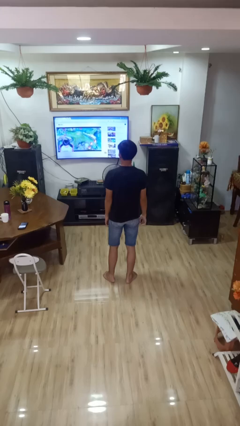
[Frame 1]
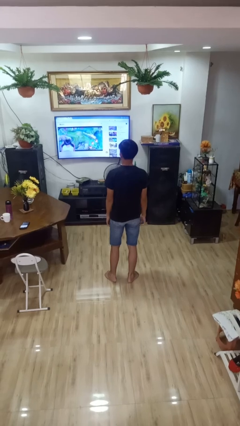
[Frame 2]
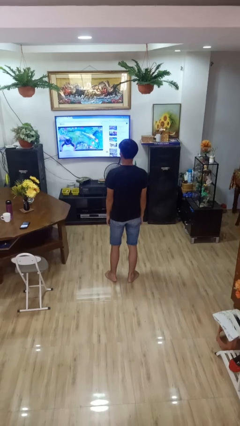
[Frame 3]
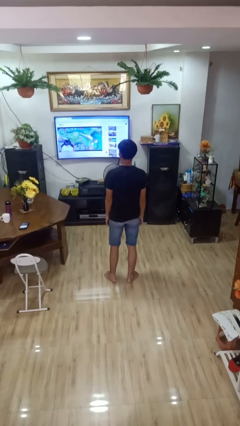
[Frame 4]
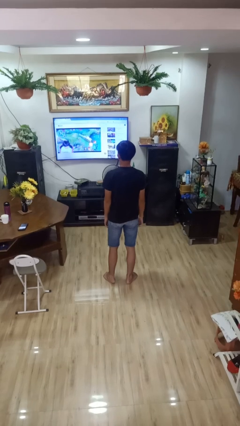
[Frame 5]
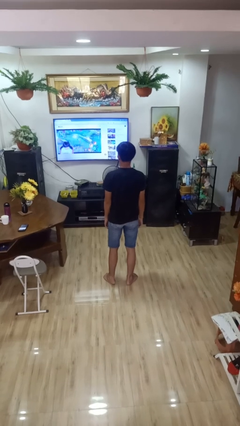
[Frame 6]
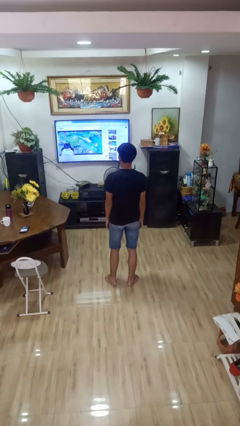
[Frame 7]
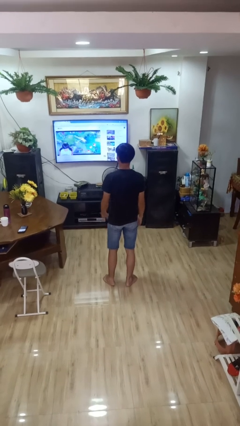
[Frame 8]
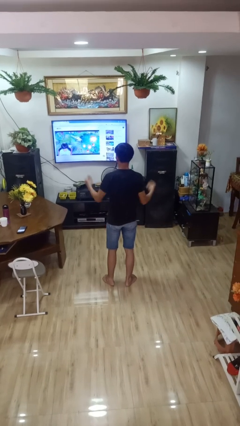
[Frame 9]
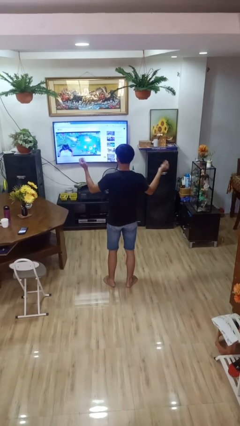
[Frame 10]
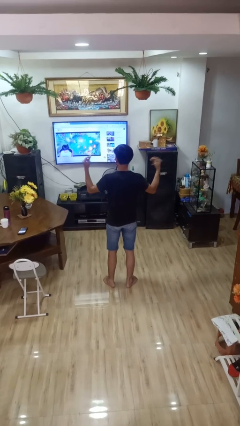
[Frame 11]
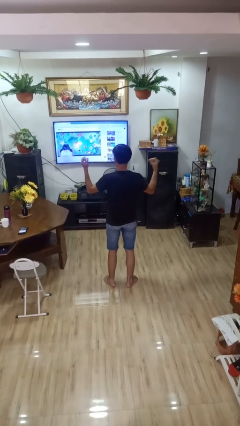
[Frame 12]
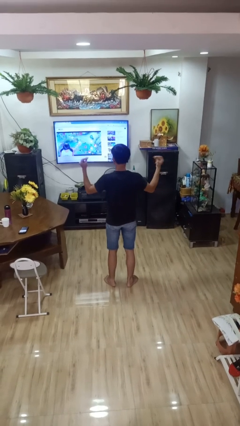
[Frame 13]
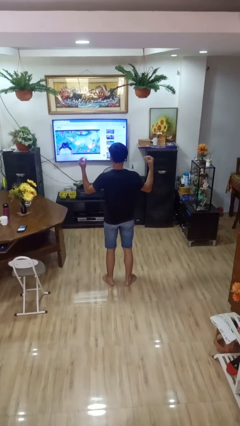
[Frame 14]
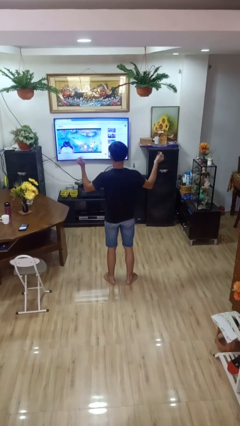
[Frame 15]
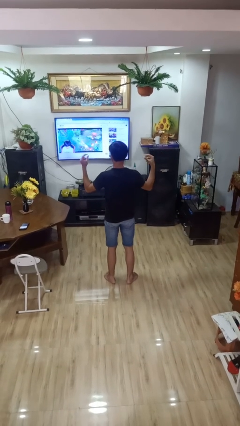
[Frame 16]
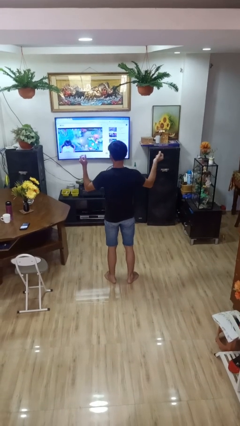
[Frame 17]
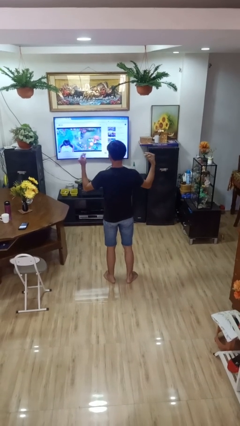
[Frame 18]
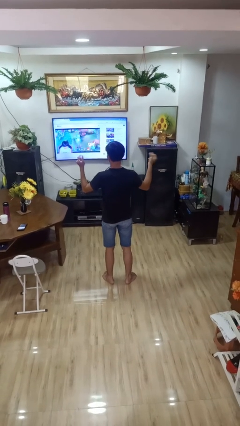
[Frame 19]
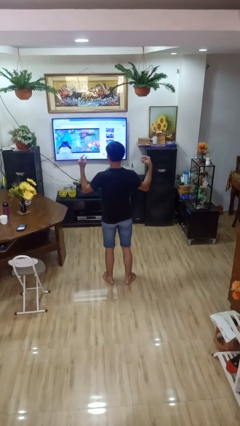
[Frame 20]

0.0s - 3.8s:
person snaps fingers

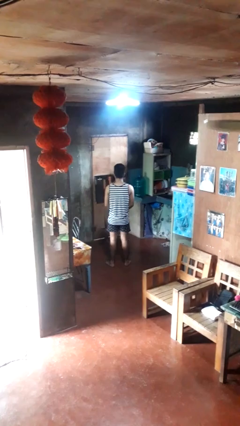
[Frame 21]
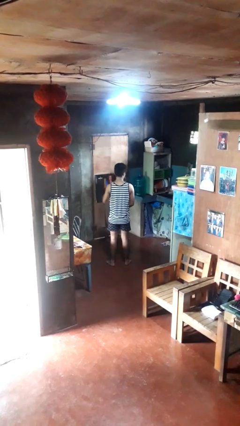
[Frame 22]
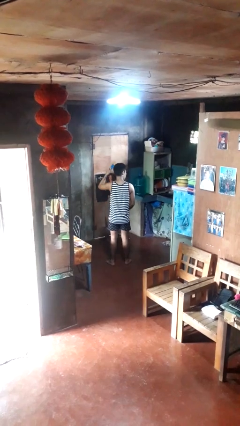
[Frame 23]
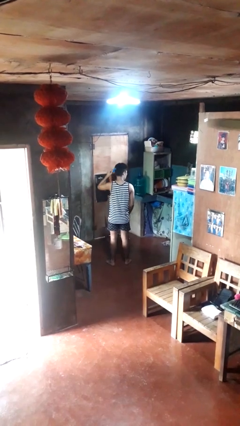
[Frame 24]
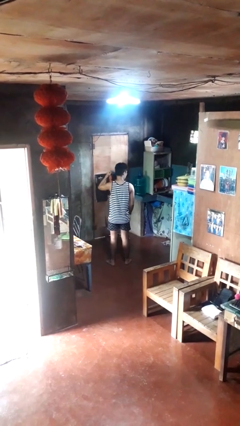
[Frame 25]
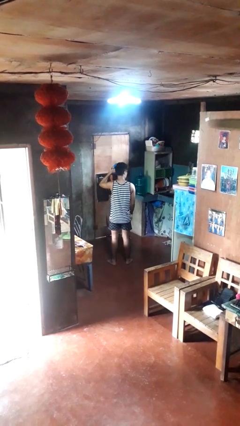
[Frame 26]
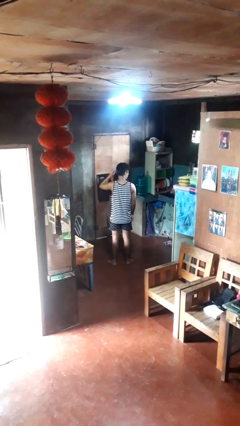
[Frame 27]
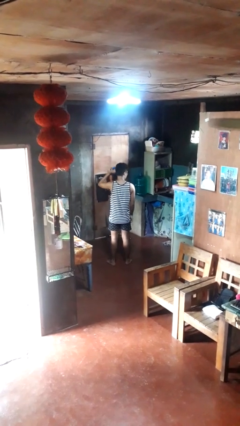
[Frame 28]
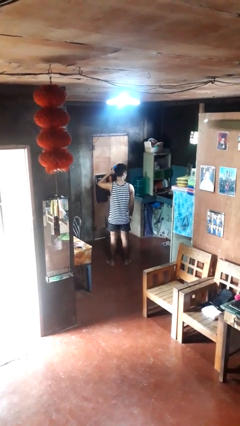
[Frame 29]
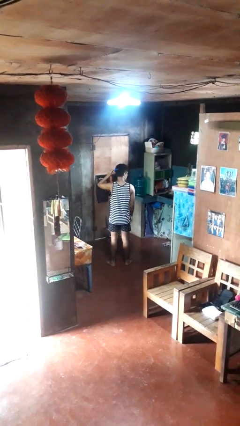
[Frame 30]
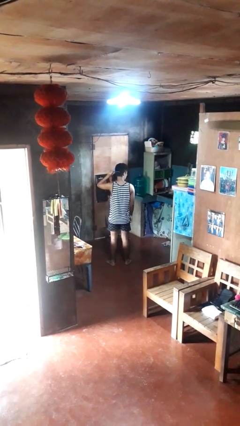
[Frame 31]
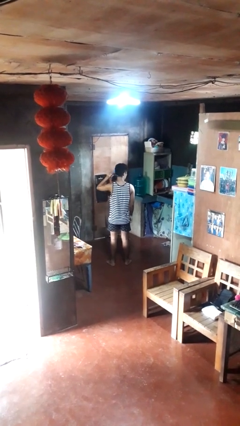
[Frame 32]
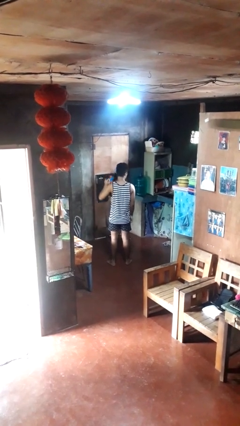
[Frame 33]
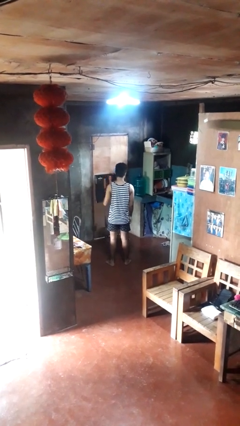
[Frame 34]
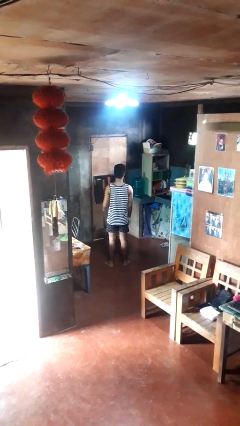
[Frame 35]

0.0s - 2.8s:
person brushes hair

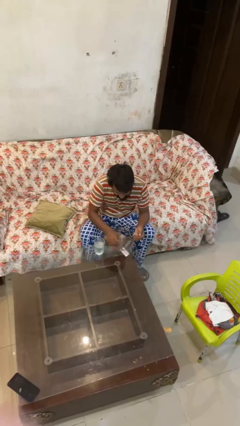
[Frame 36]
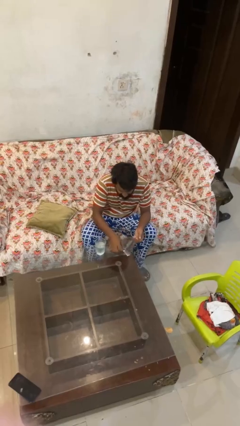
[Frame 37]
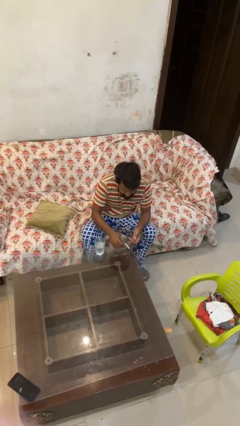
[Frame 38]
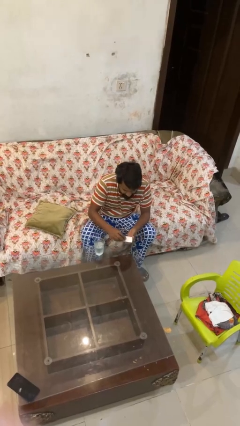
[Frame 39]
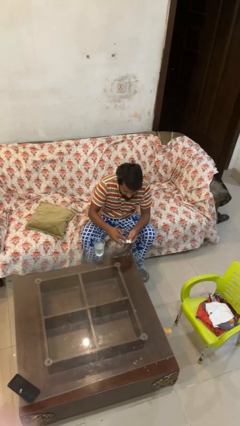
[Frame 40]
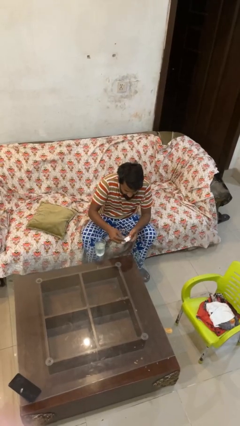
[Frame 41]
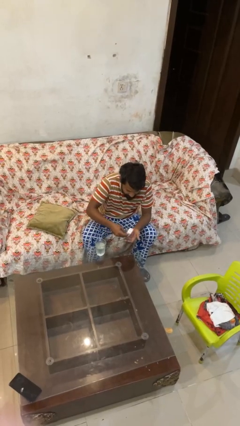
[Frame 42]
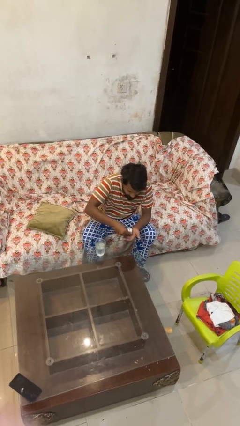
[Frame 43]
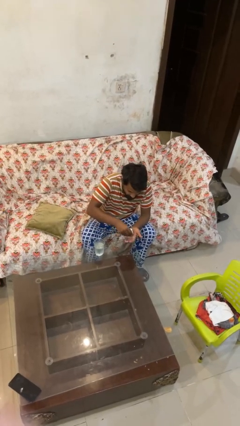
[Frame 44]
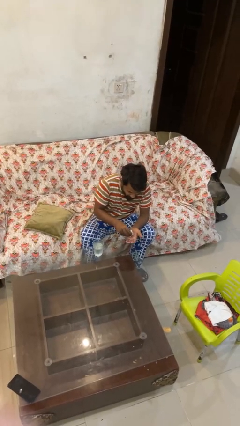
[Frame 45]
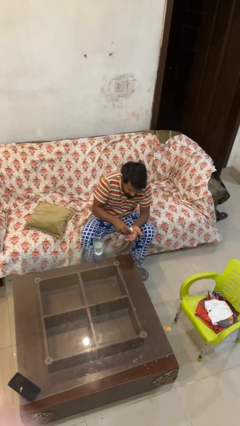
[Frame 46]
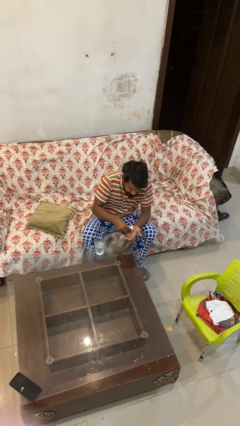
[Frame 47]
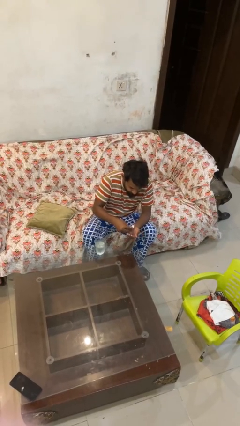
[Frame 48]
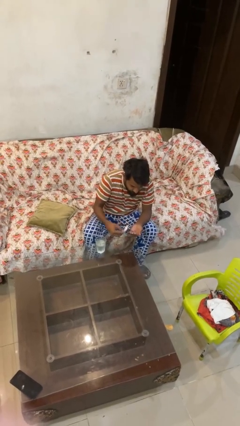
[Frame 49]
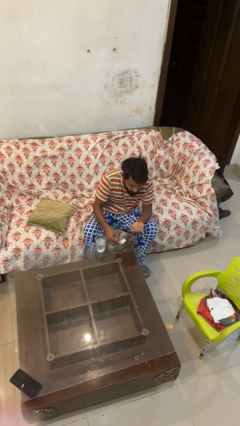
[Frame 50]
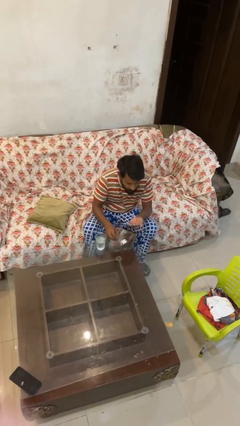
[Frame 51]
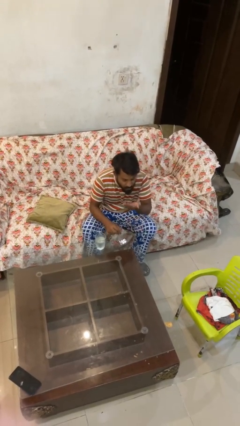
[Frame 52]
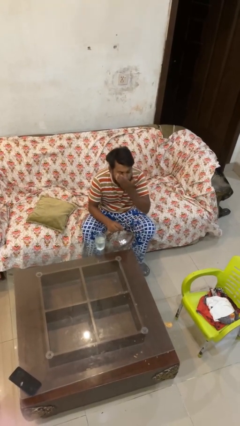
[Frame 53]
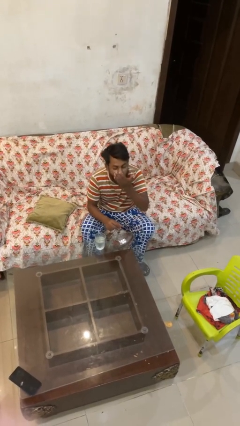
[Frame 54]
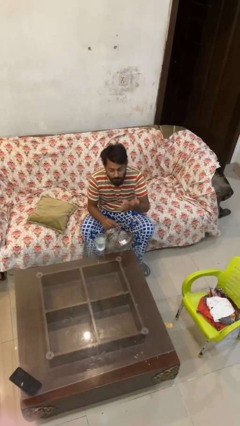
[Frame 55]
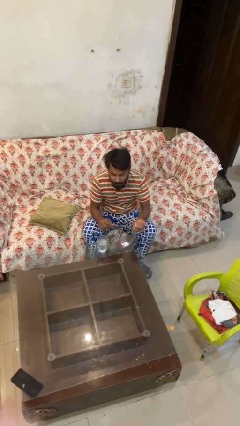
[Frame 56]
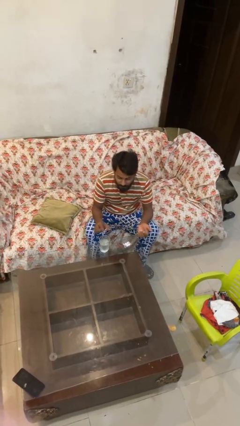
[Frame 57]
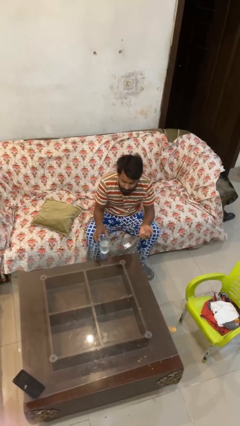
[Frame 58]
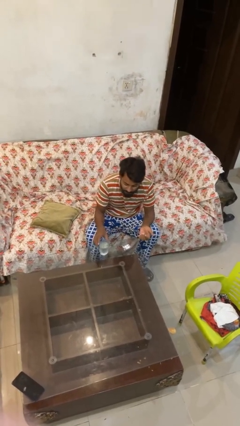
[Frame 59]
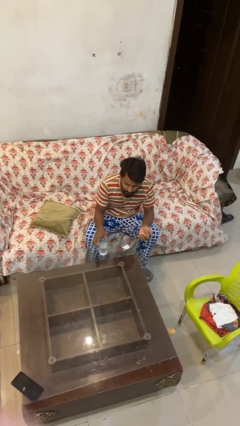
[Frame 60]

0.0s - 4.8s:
person takes medicine pills

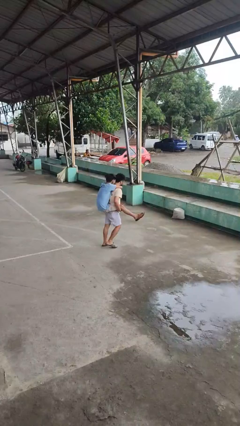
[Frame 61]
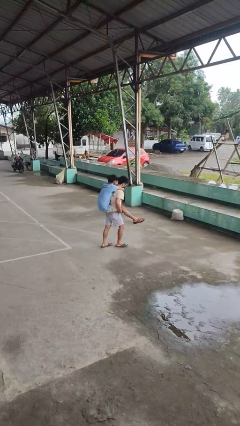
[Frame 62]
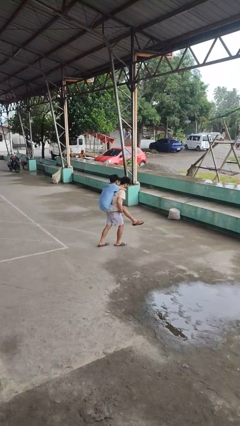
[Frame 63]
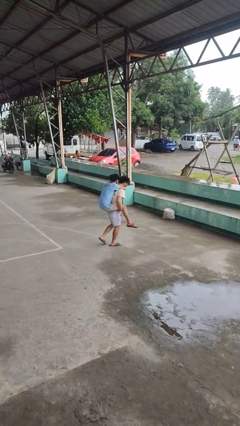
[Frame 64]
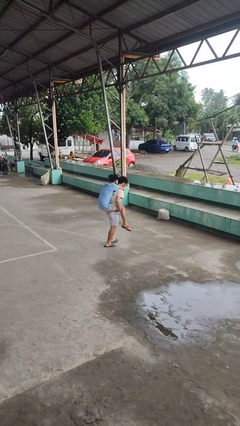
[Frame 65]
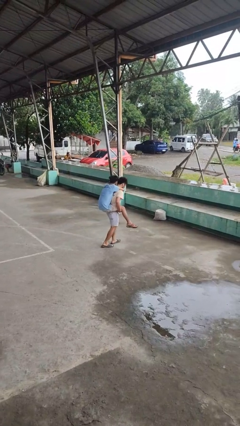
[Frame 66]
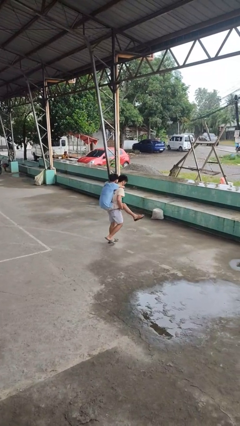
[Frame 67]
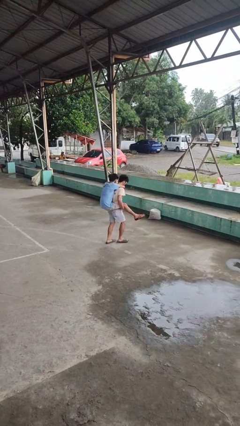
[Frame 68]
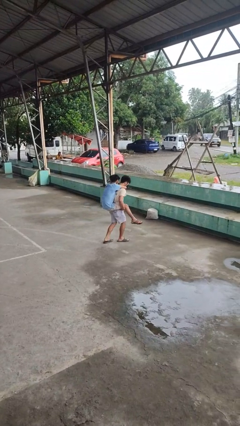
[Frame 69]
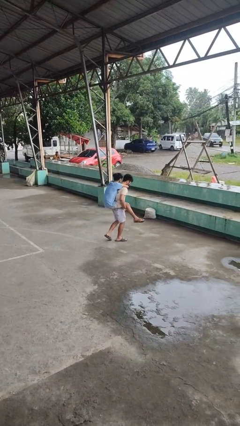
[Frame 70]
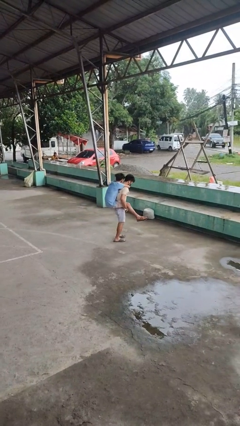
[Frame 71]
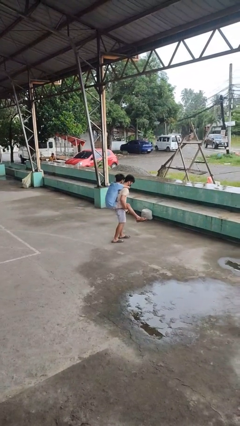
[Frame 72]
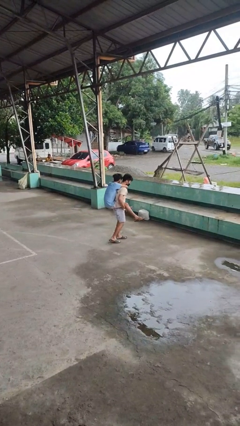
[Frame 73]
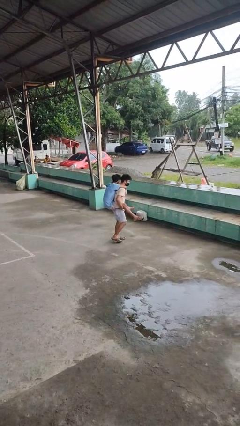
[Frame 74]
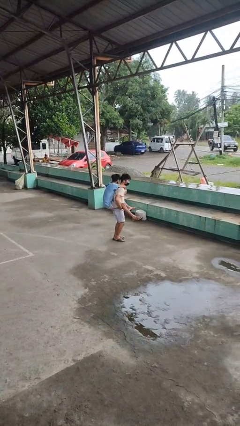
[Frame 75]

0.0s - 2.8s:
person carries person on back

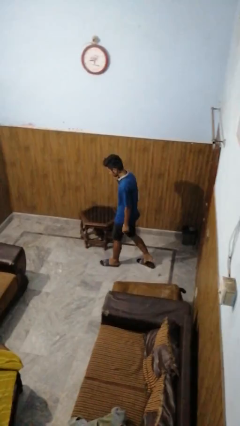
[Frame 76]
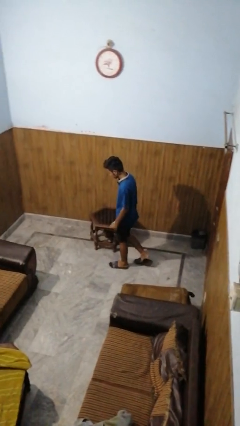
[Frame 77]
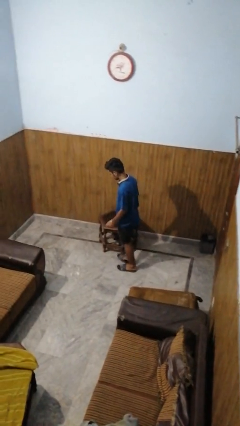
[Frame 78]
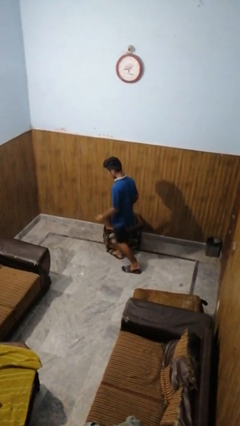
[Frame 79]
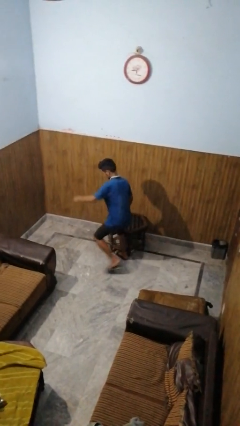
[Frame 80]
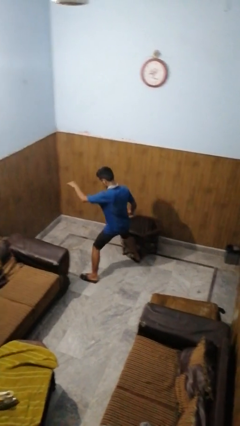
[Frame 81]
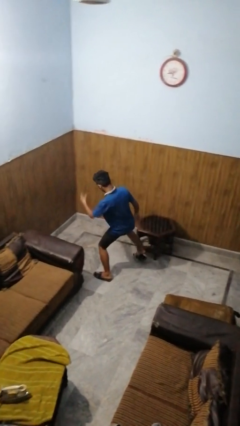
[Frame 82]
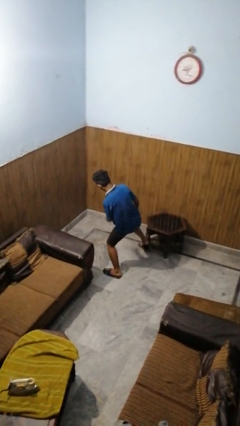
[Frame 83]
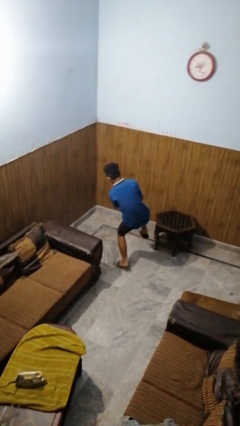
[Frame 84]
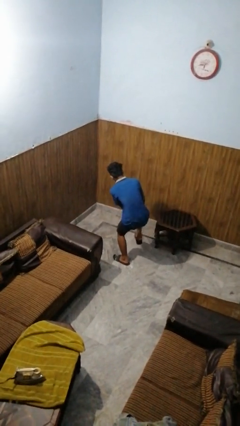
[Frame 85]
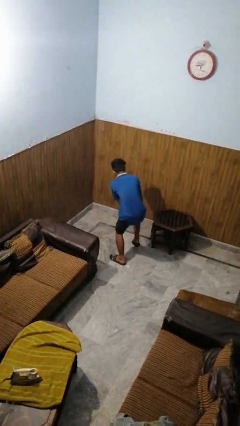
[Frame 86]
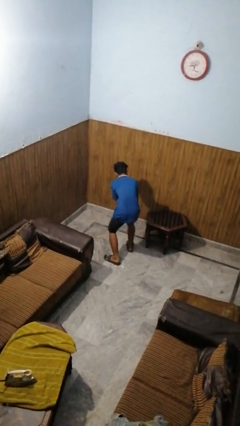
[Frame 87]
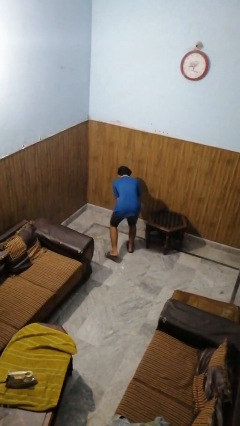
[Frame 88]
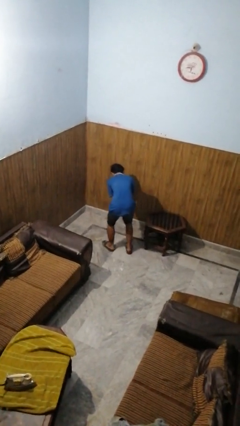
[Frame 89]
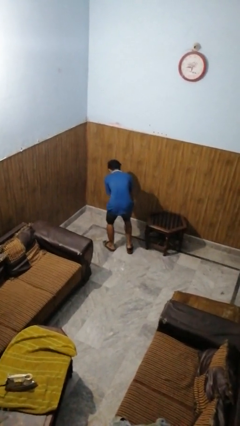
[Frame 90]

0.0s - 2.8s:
person bumps into table

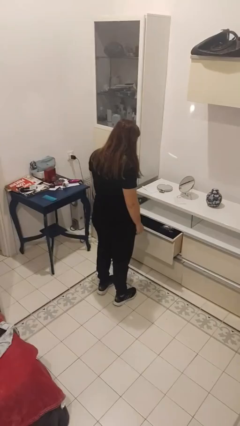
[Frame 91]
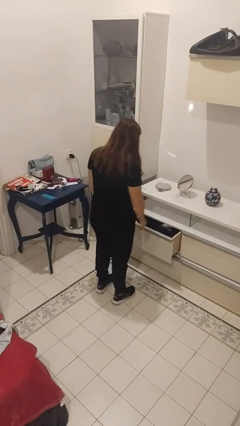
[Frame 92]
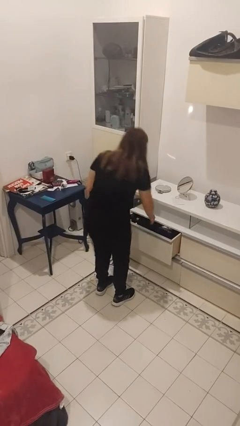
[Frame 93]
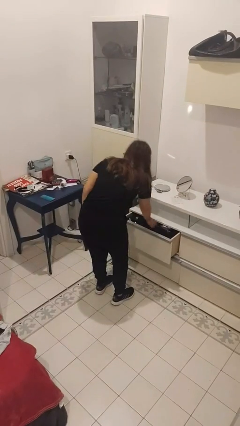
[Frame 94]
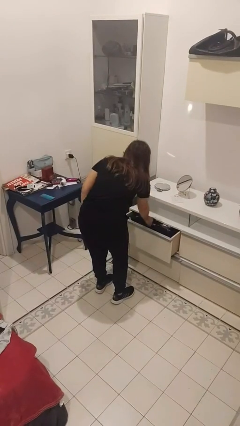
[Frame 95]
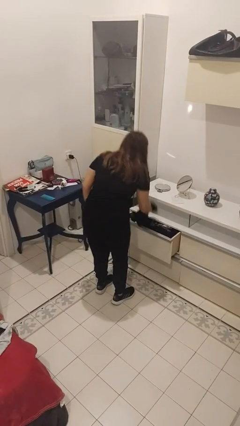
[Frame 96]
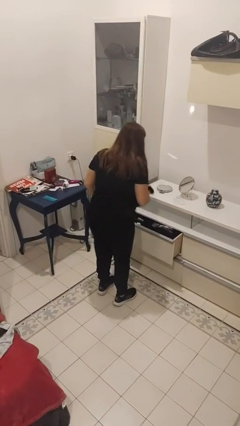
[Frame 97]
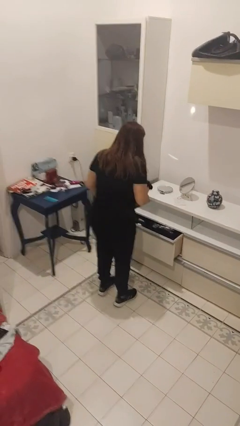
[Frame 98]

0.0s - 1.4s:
person takes clothes from dresser
